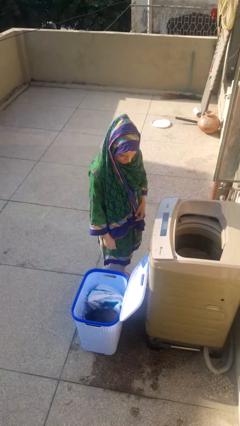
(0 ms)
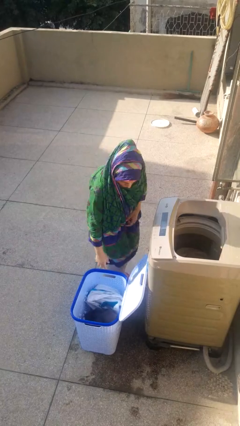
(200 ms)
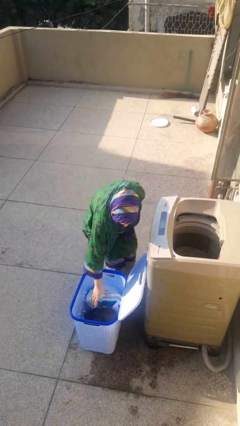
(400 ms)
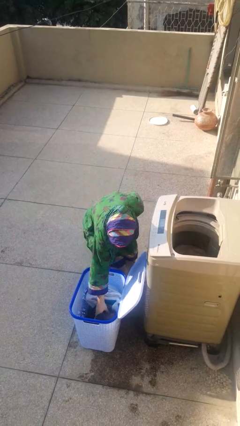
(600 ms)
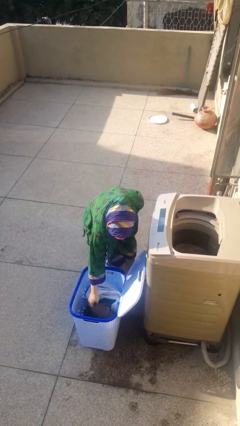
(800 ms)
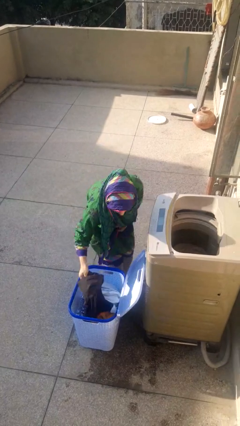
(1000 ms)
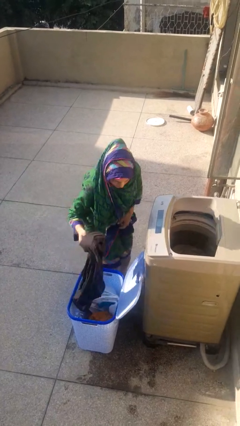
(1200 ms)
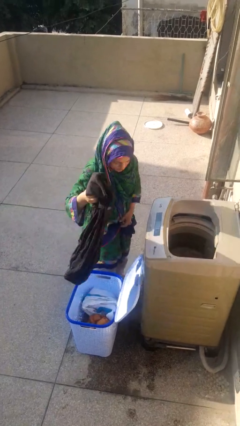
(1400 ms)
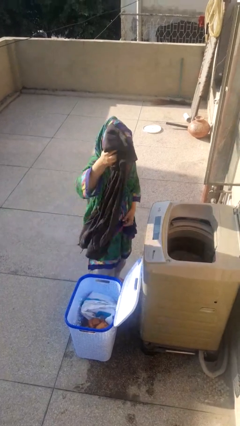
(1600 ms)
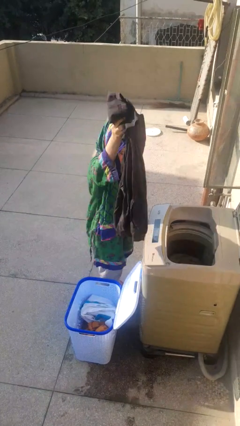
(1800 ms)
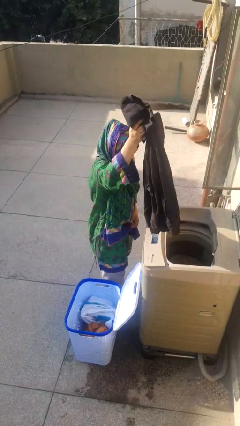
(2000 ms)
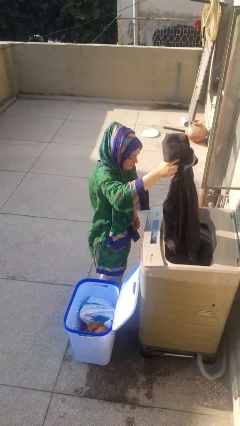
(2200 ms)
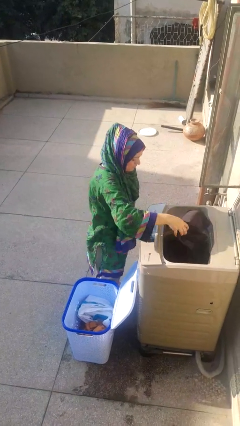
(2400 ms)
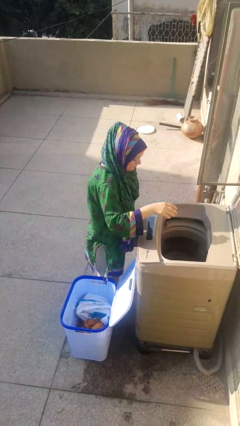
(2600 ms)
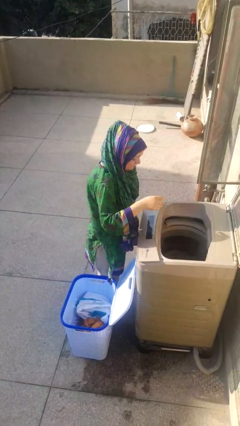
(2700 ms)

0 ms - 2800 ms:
person loads clotheswasher

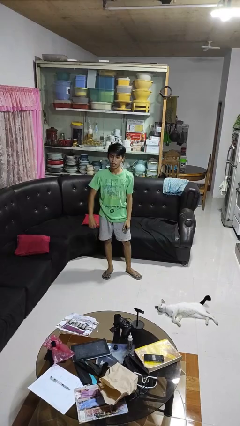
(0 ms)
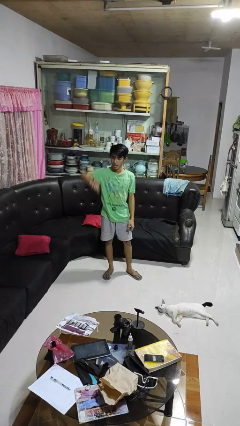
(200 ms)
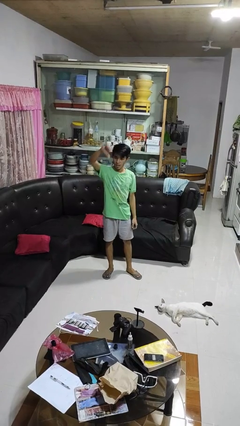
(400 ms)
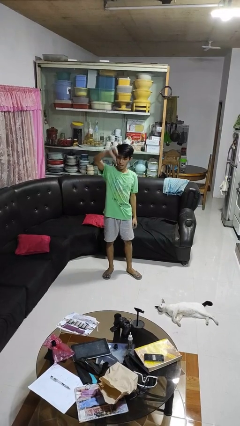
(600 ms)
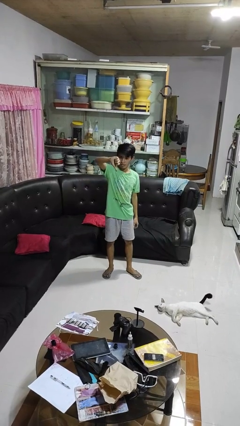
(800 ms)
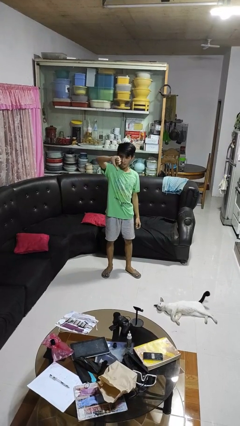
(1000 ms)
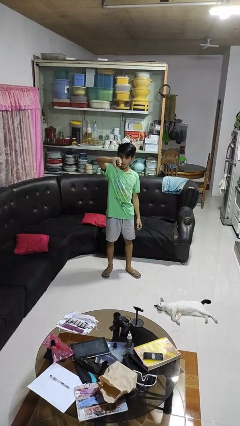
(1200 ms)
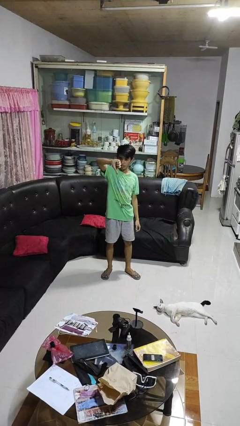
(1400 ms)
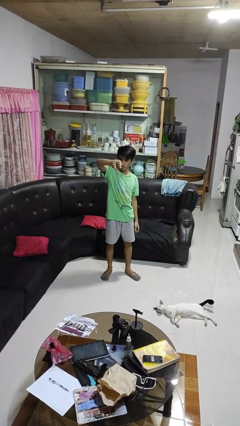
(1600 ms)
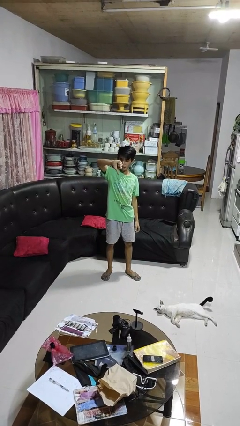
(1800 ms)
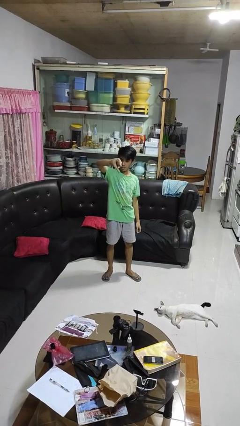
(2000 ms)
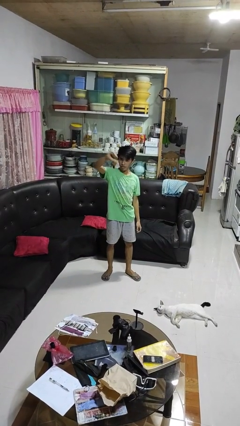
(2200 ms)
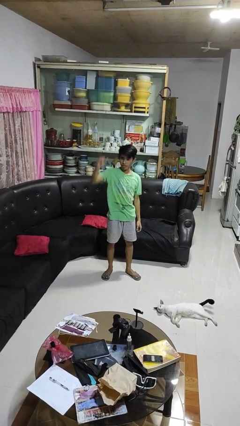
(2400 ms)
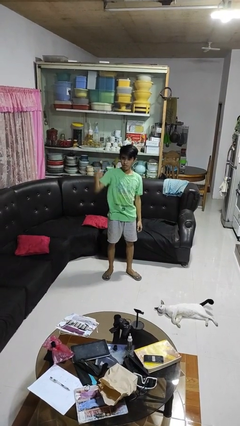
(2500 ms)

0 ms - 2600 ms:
person gestures thumbs down

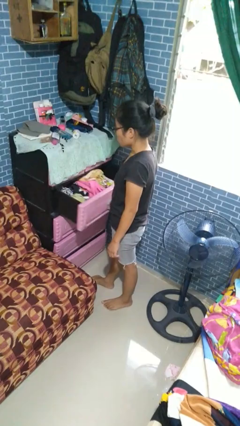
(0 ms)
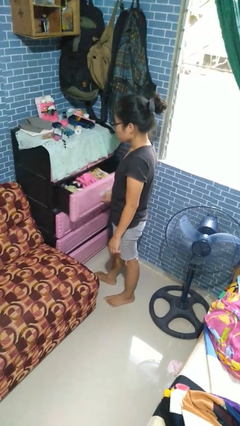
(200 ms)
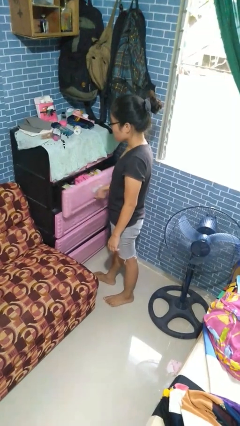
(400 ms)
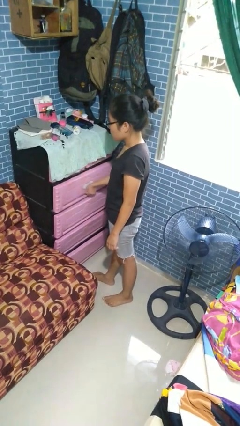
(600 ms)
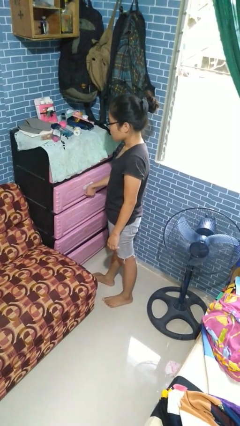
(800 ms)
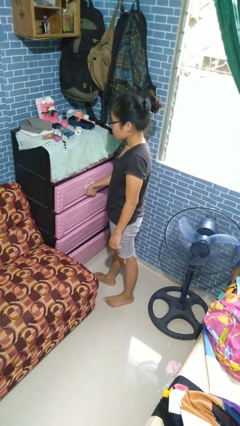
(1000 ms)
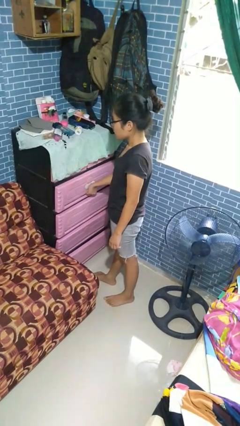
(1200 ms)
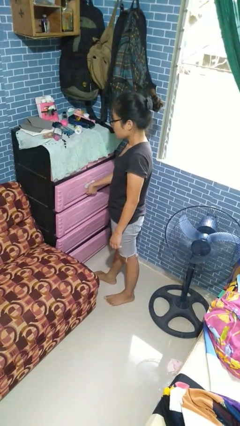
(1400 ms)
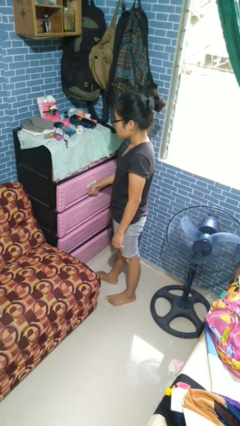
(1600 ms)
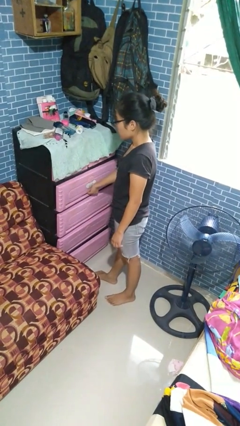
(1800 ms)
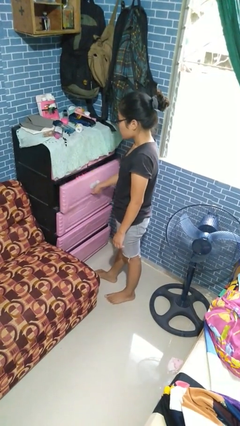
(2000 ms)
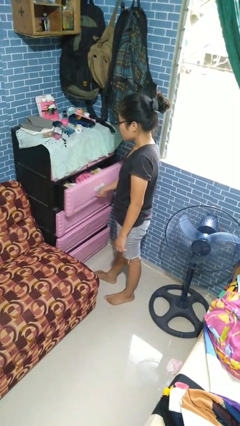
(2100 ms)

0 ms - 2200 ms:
person closes dresser drawer

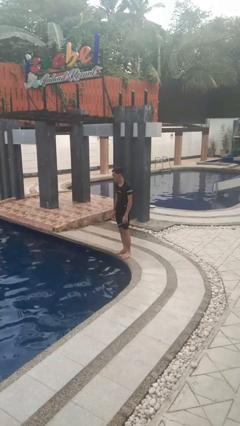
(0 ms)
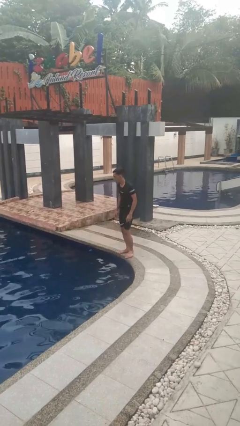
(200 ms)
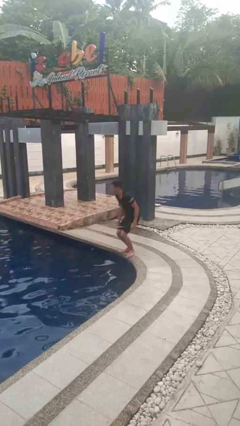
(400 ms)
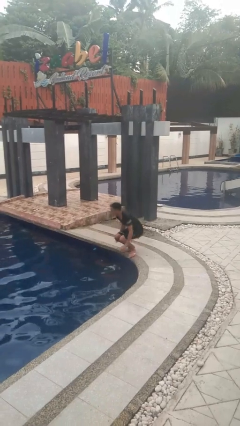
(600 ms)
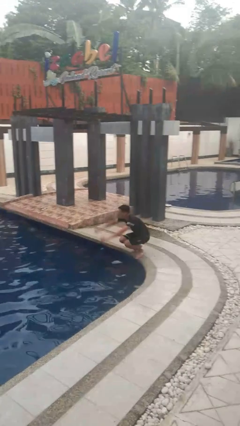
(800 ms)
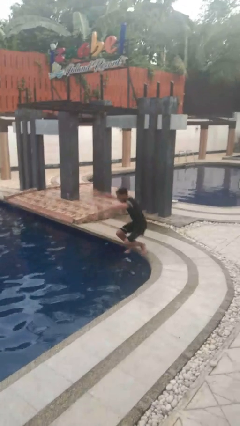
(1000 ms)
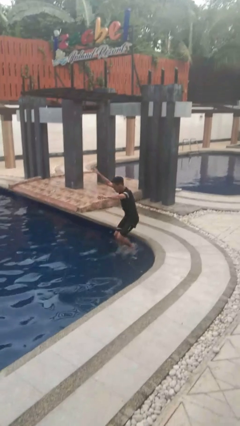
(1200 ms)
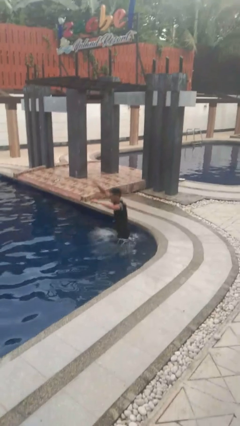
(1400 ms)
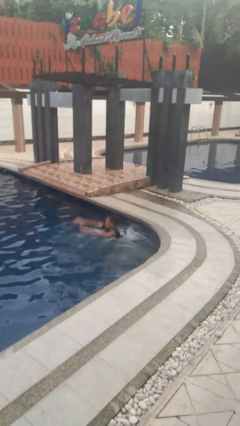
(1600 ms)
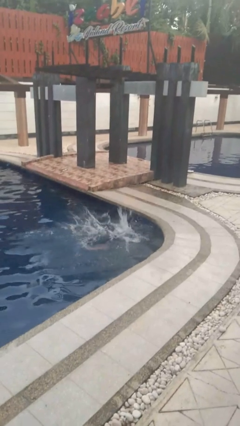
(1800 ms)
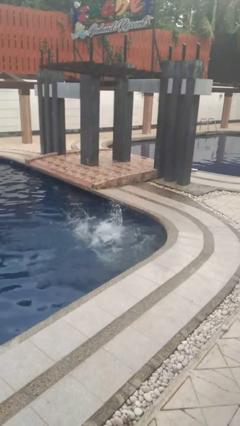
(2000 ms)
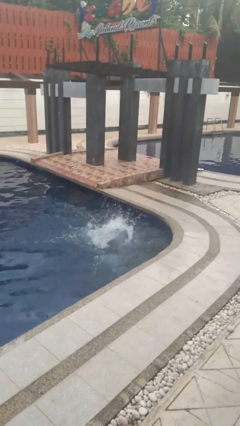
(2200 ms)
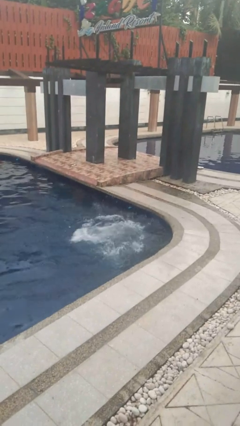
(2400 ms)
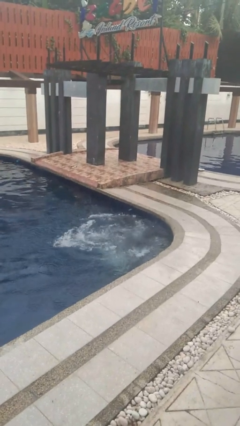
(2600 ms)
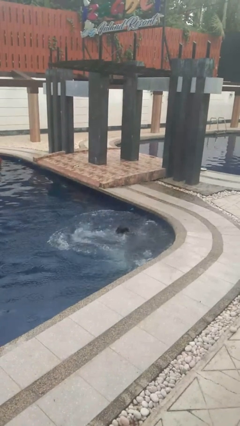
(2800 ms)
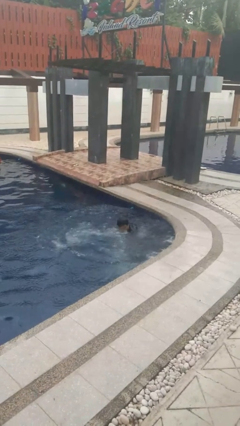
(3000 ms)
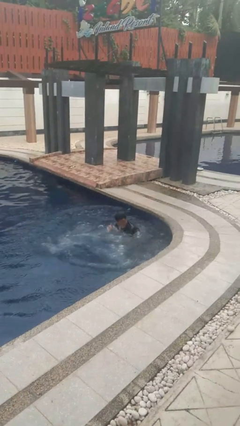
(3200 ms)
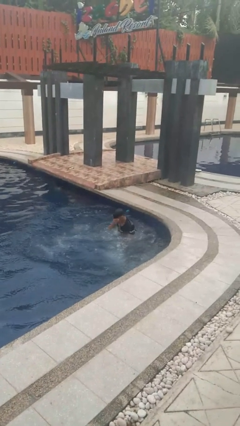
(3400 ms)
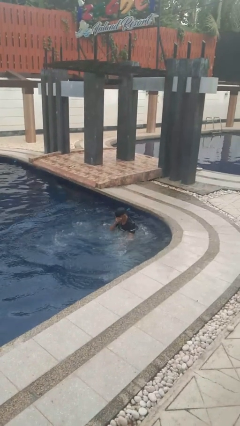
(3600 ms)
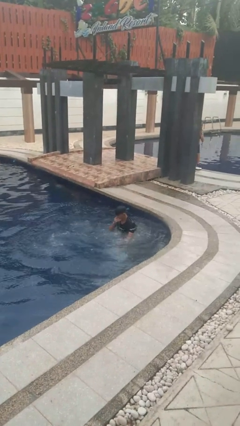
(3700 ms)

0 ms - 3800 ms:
person jumps into pool

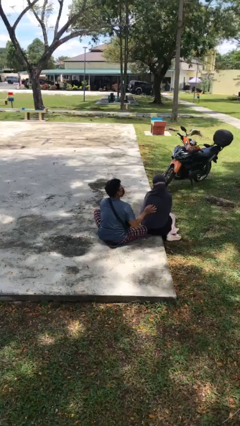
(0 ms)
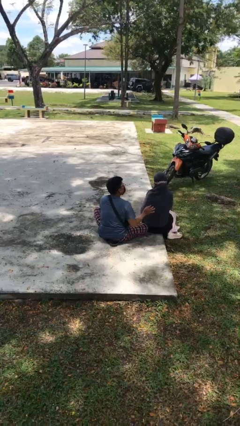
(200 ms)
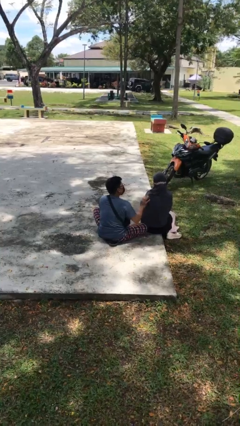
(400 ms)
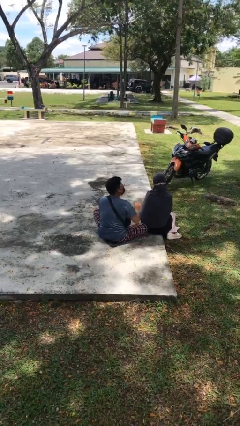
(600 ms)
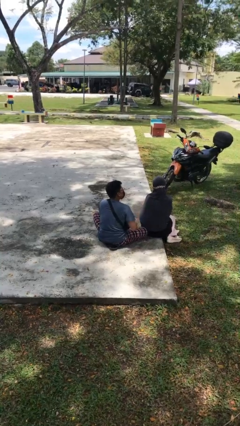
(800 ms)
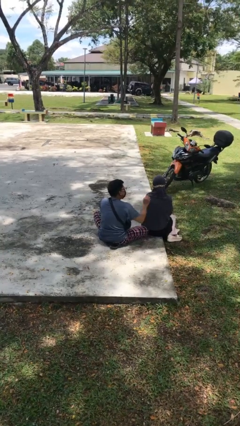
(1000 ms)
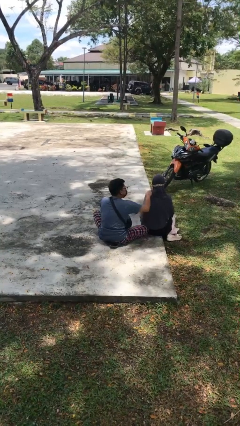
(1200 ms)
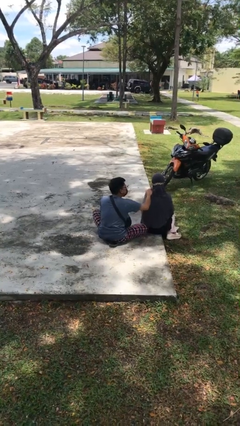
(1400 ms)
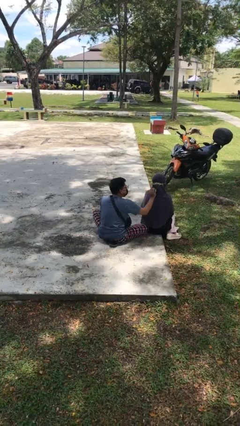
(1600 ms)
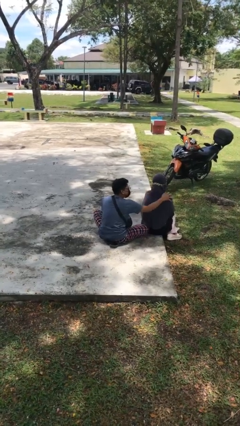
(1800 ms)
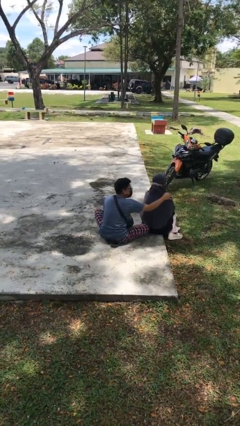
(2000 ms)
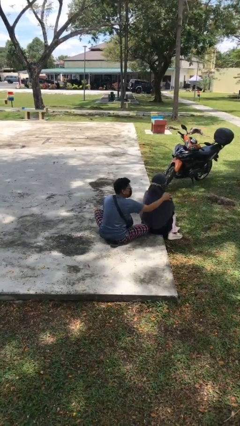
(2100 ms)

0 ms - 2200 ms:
person pounds shoulders of person

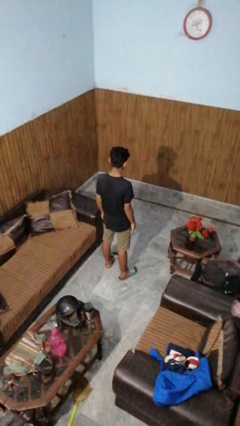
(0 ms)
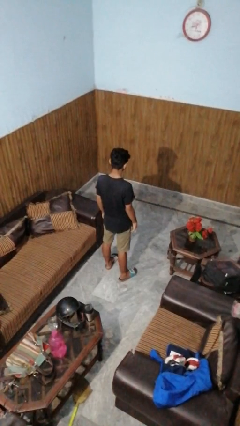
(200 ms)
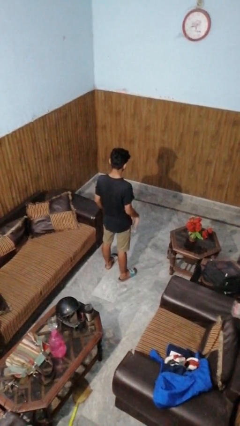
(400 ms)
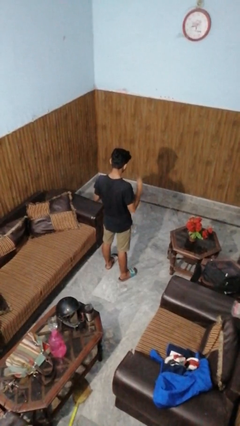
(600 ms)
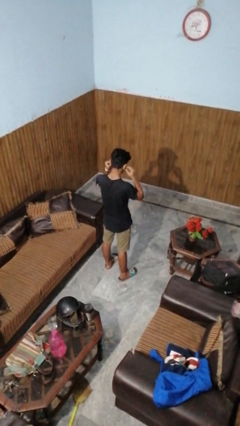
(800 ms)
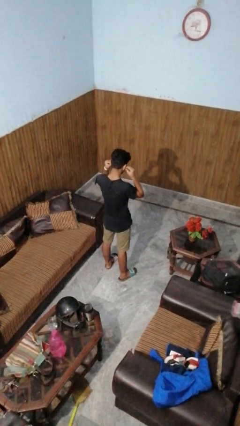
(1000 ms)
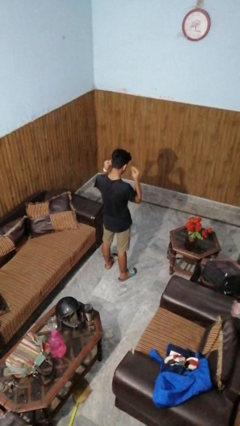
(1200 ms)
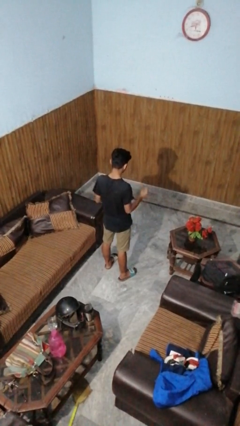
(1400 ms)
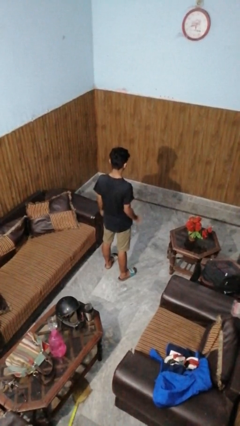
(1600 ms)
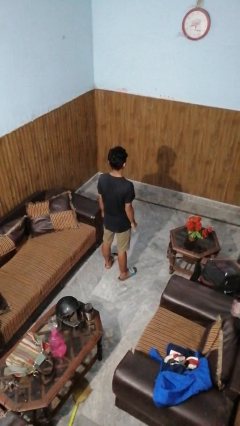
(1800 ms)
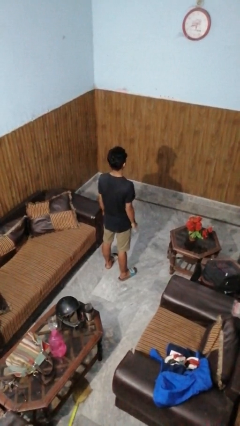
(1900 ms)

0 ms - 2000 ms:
person takes off headphones

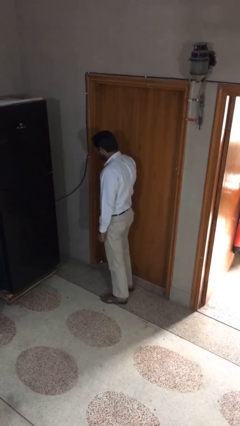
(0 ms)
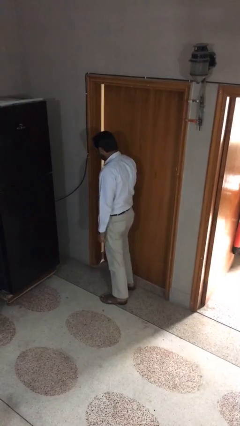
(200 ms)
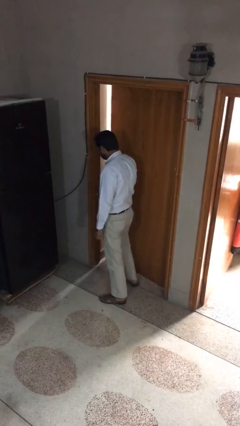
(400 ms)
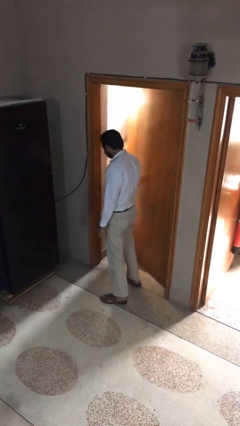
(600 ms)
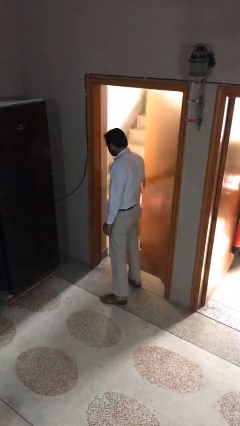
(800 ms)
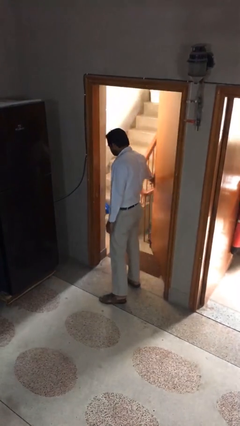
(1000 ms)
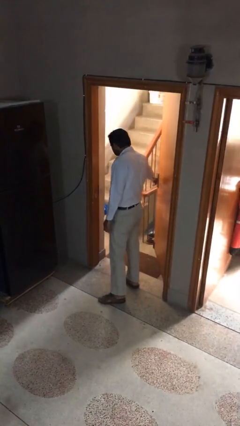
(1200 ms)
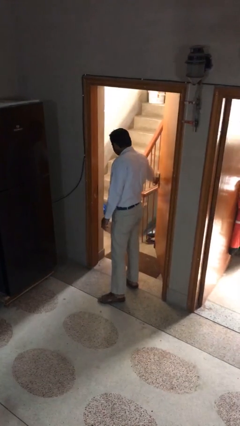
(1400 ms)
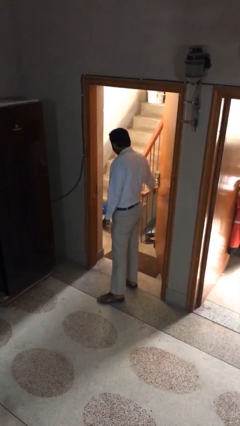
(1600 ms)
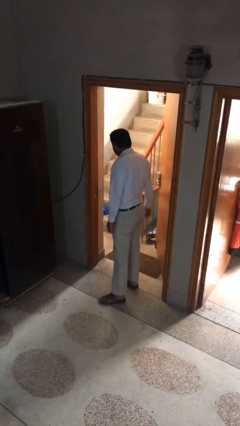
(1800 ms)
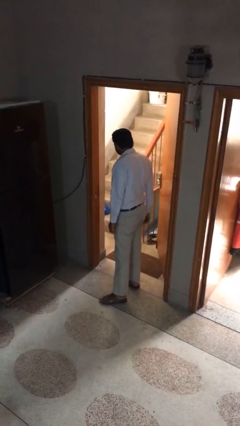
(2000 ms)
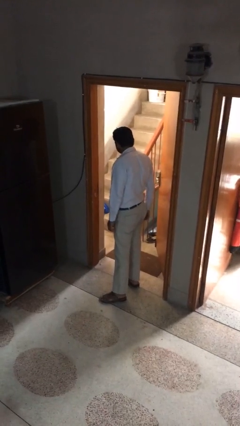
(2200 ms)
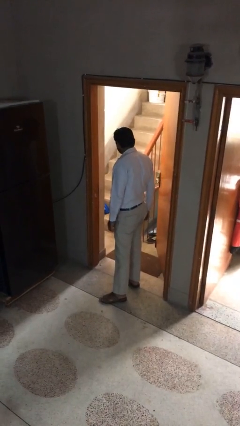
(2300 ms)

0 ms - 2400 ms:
person opens facility door
